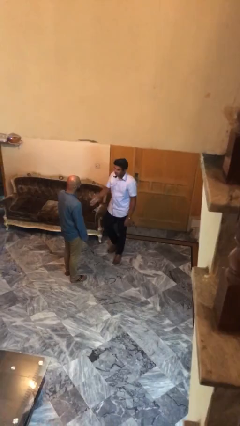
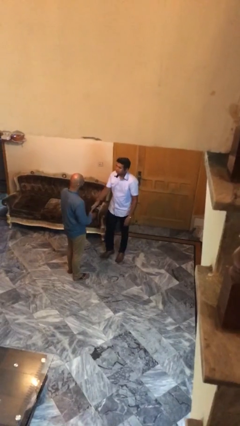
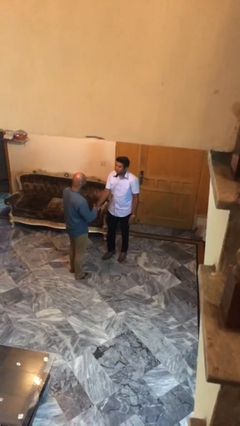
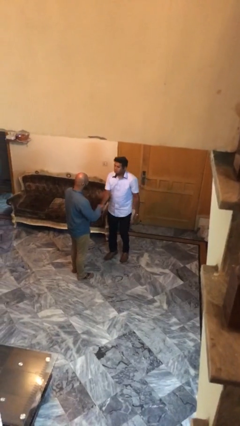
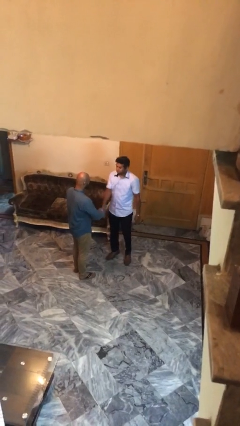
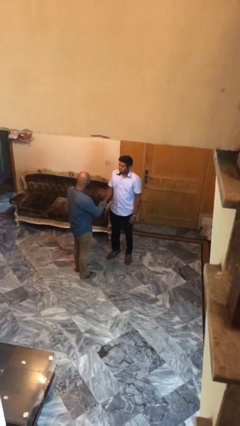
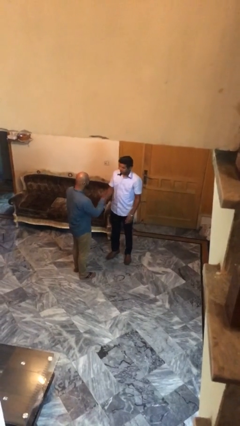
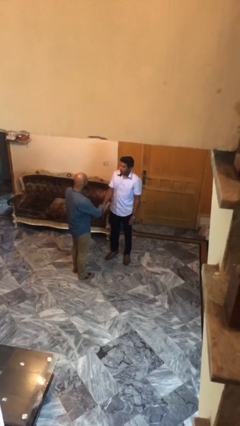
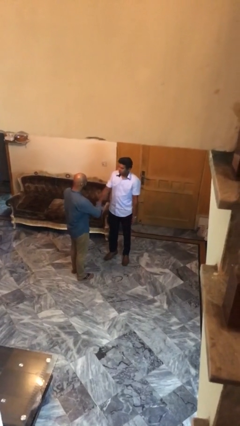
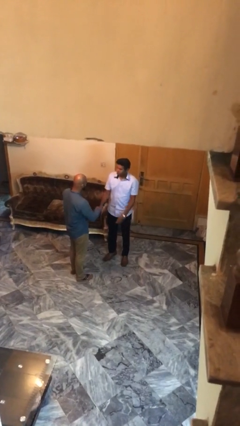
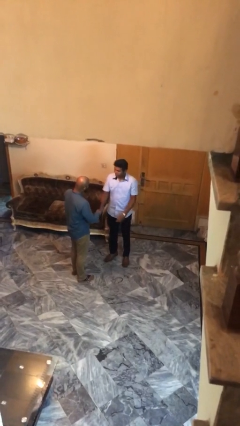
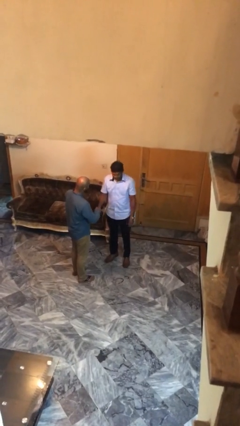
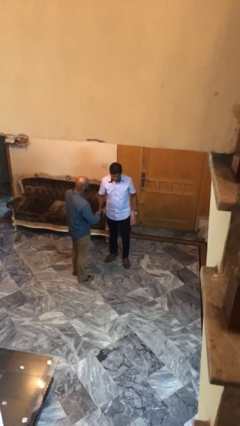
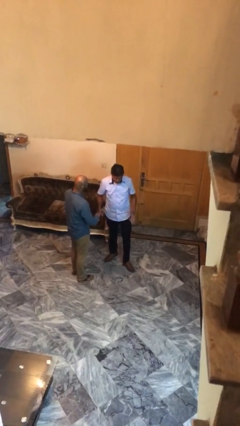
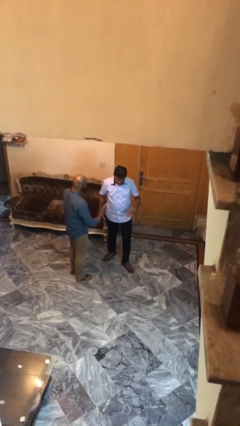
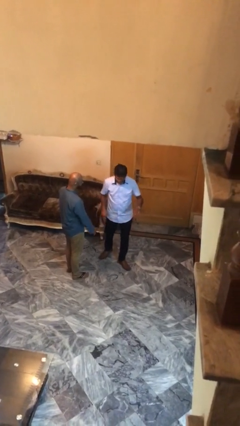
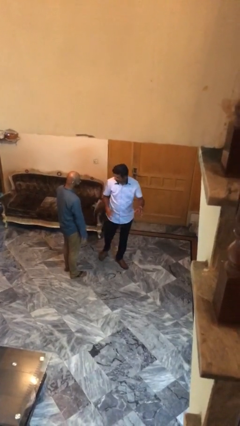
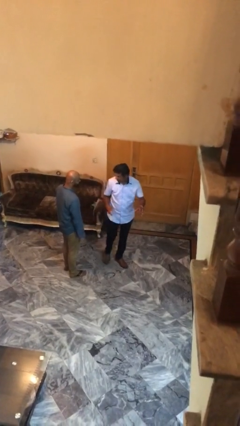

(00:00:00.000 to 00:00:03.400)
person shakes hand

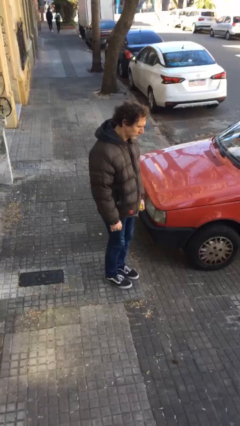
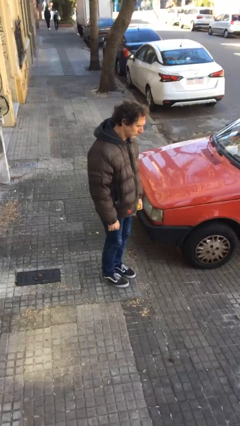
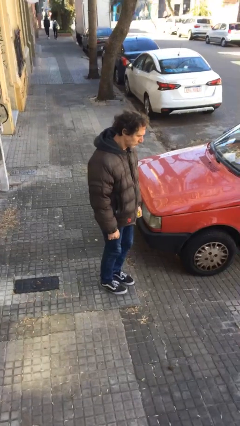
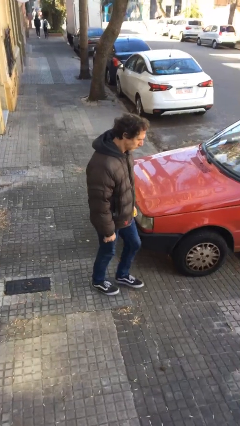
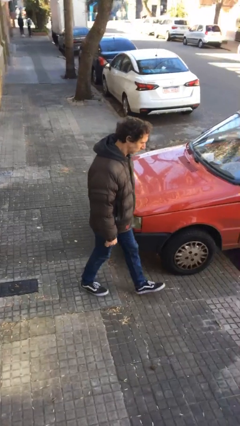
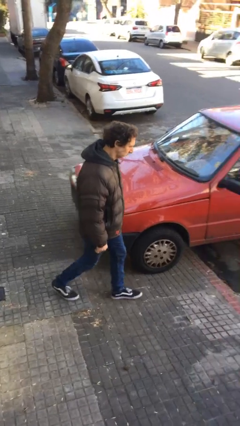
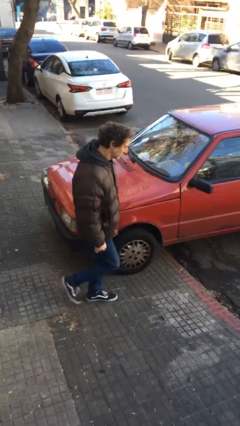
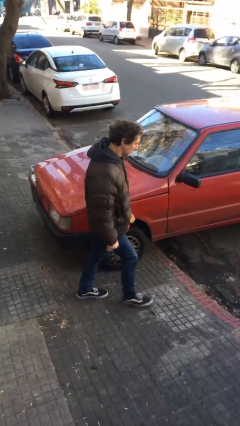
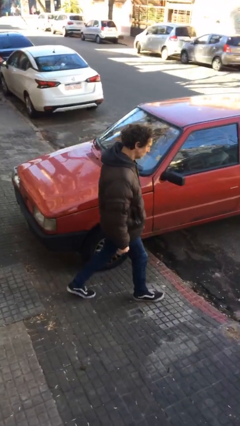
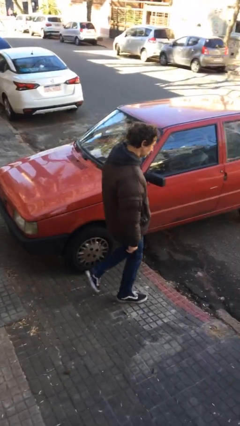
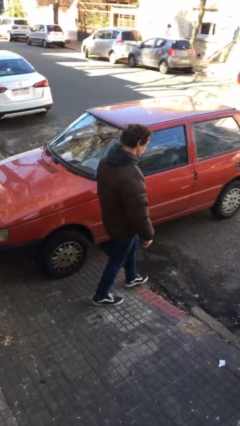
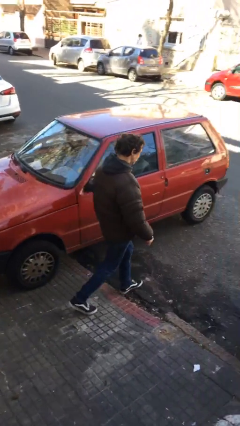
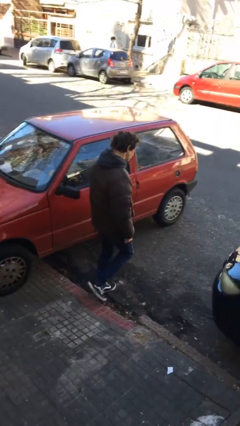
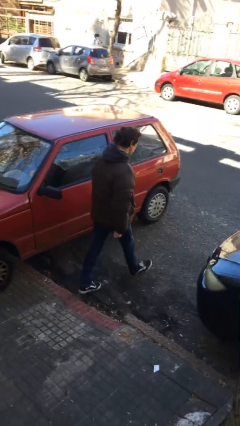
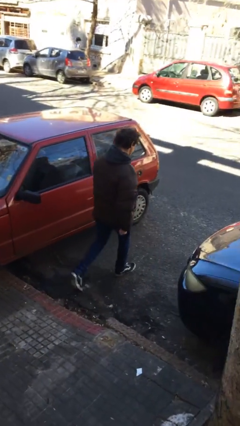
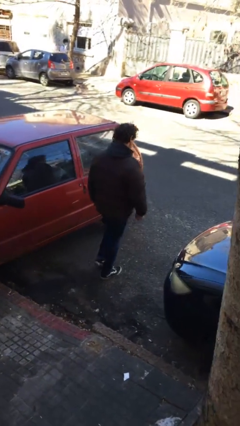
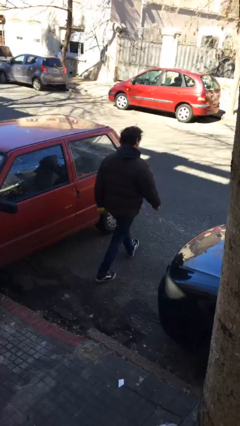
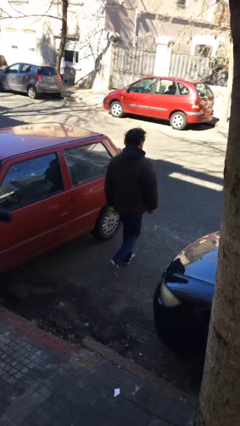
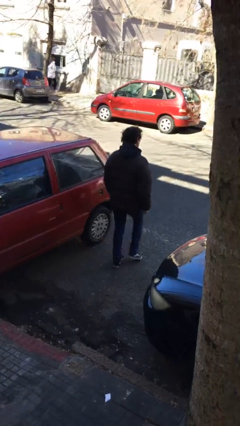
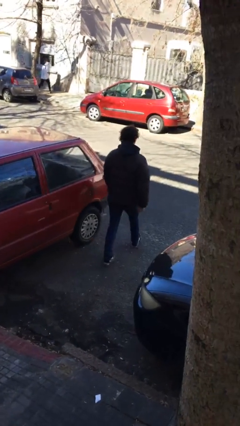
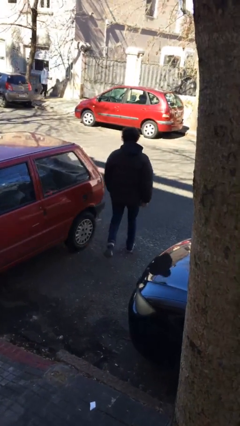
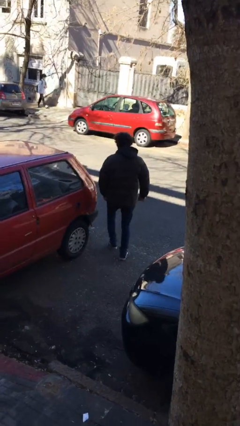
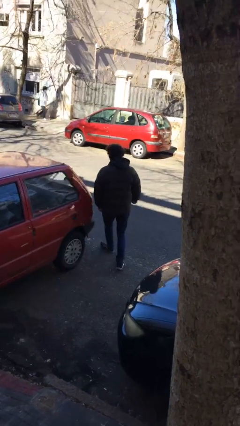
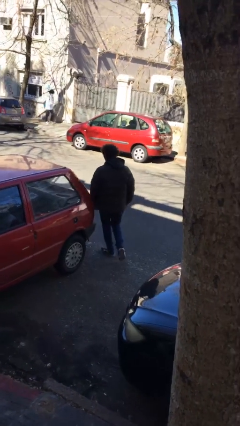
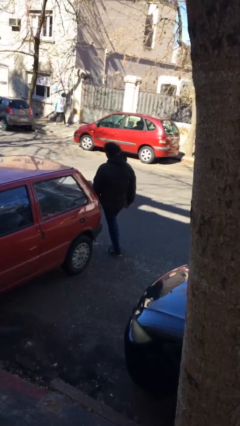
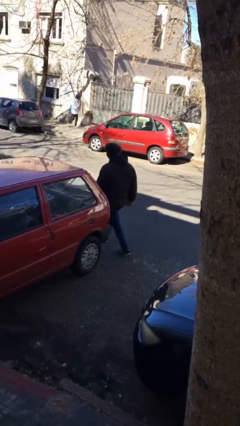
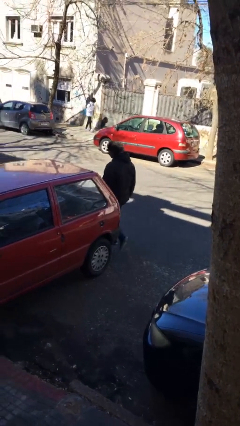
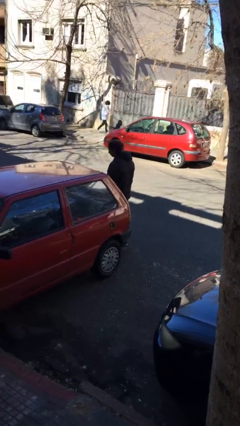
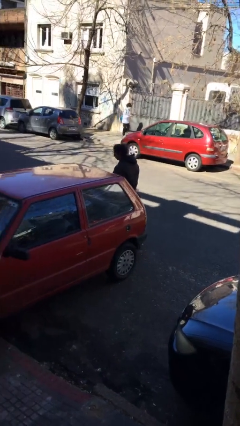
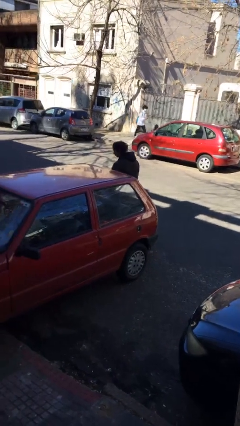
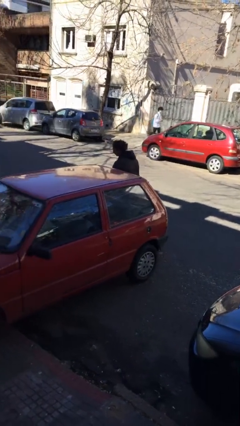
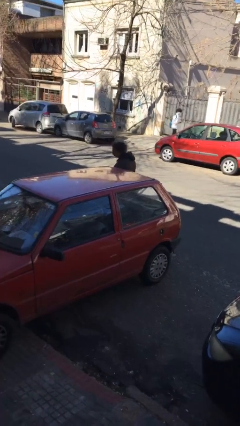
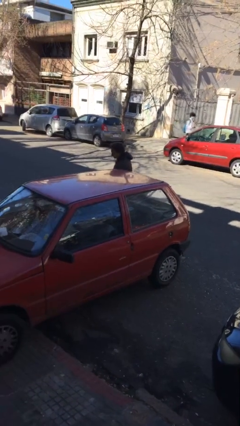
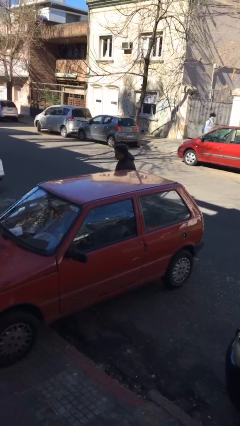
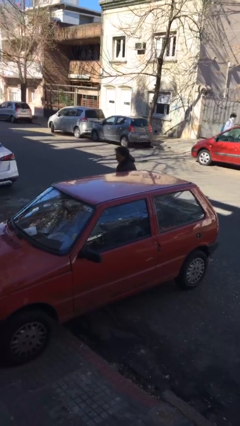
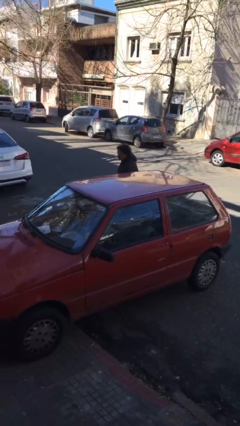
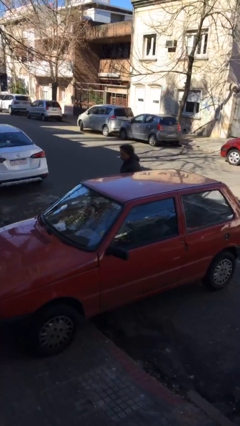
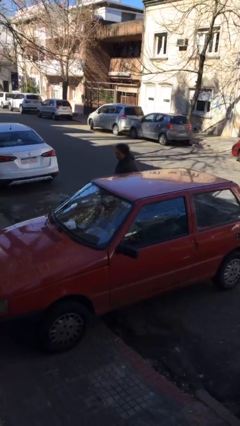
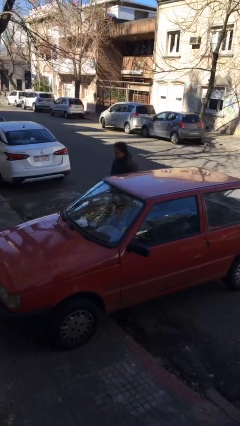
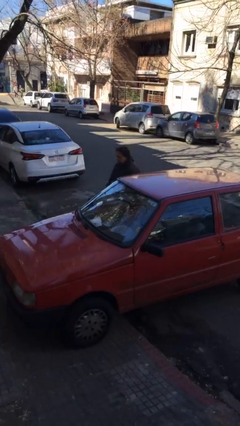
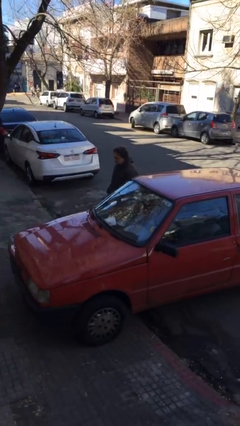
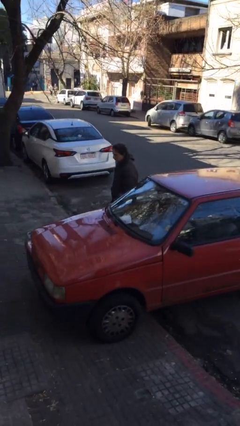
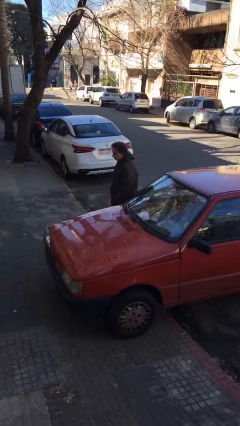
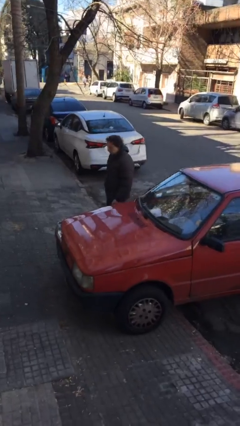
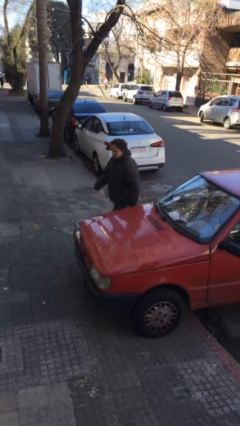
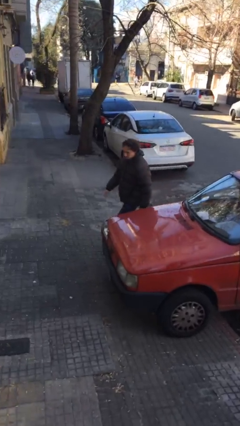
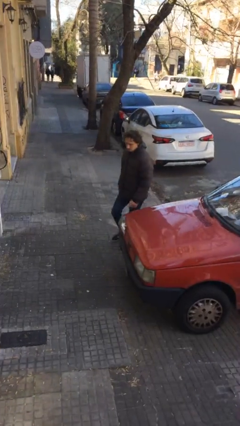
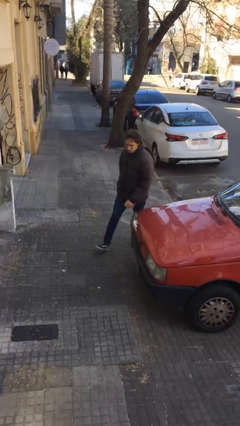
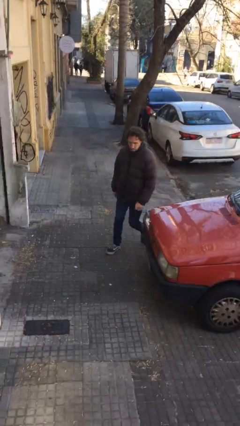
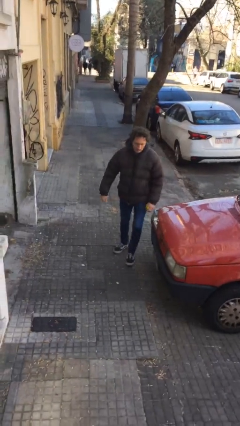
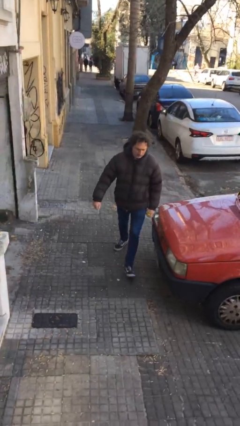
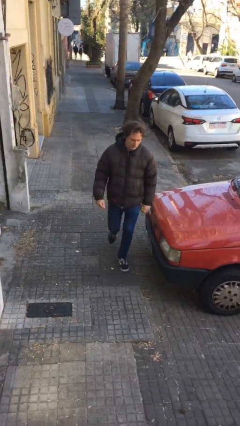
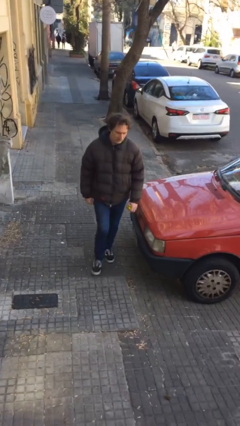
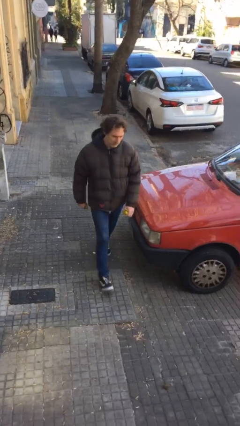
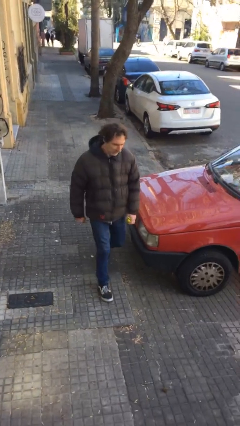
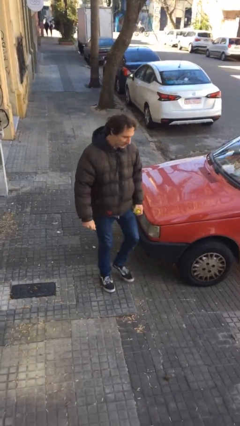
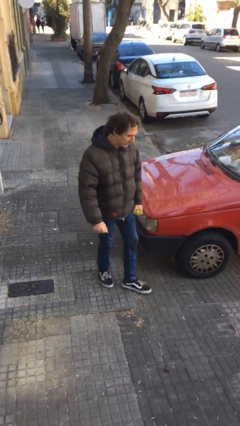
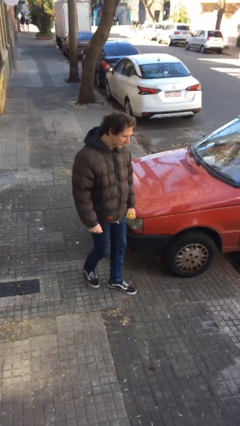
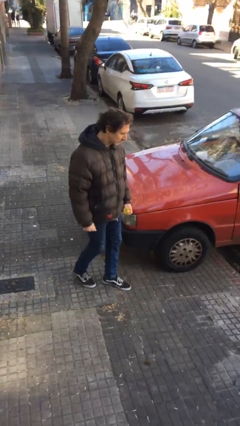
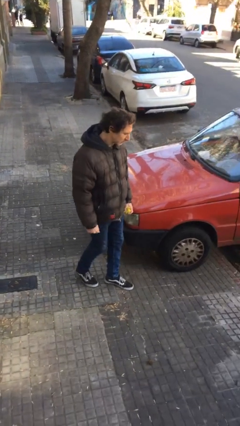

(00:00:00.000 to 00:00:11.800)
person walks around car

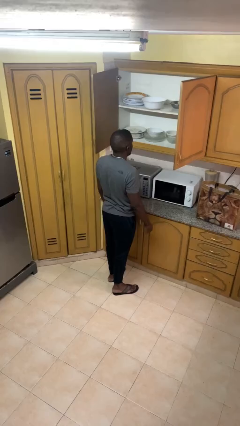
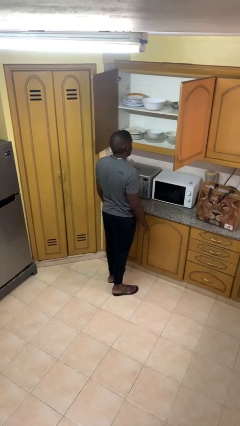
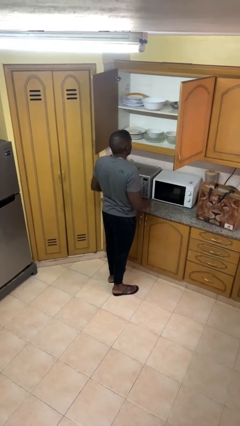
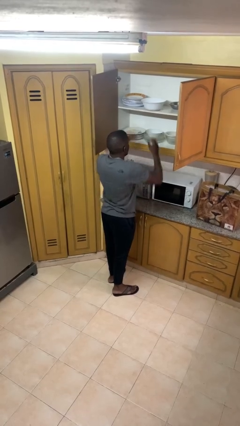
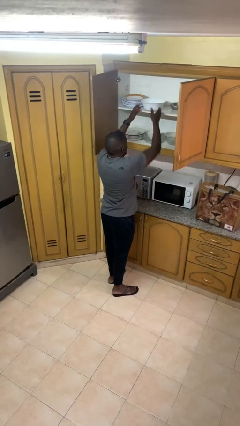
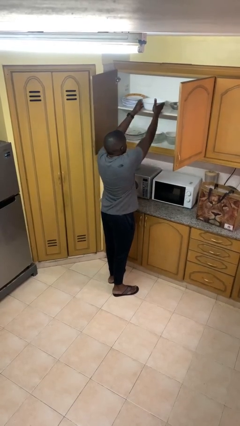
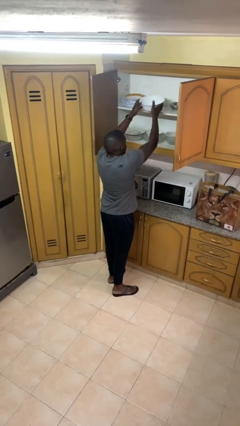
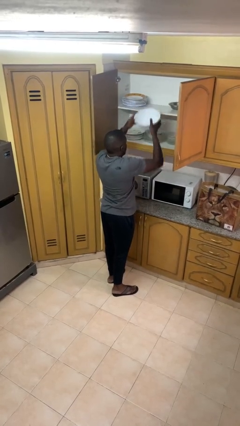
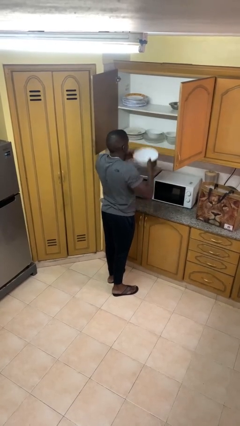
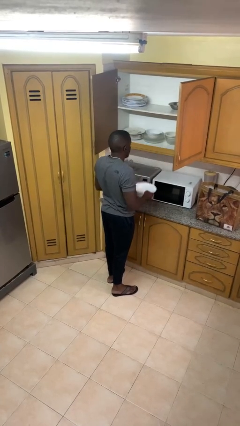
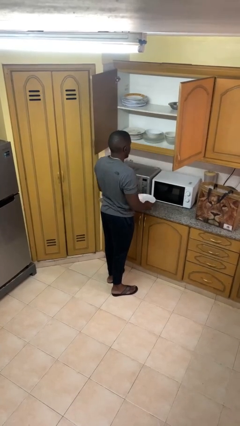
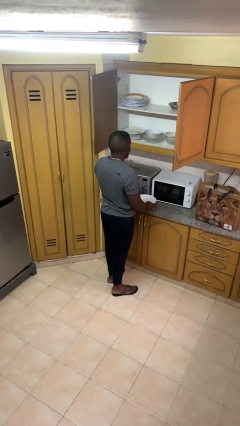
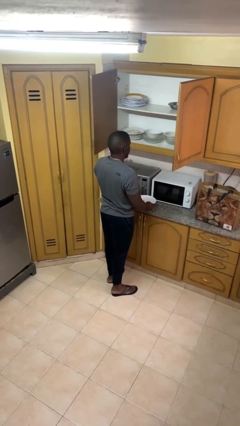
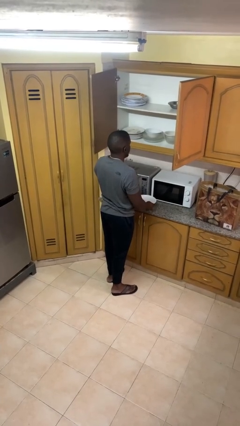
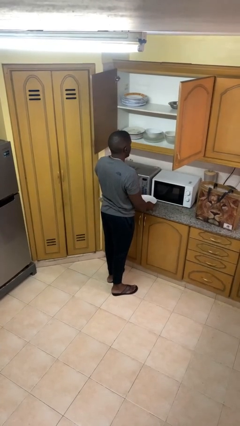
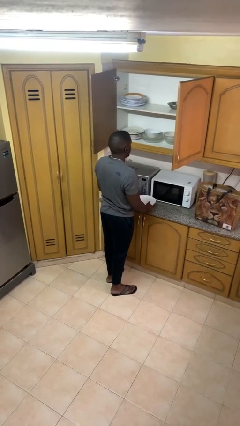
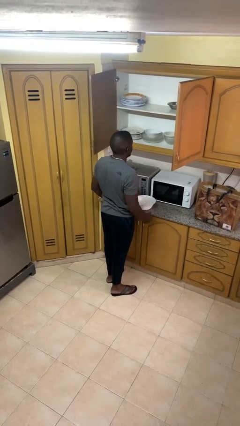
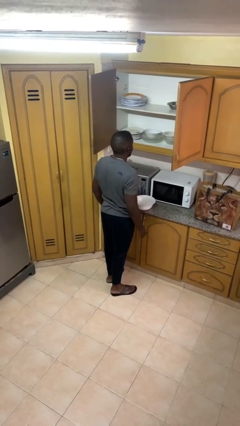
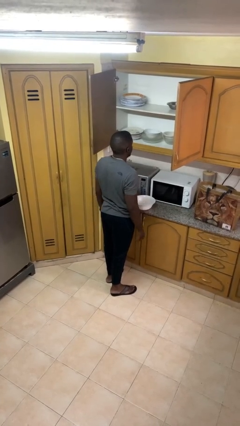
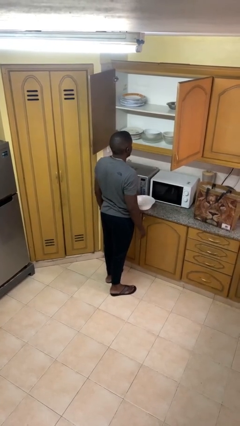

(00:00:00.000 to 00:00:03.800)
person takes object from cabinet
